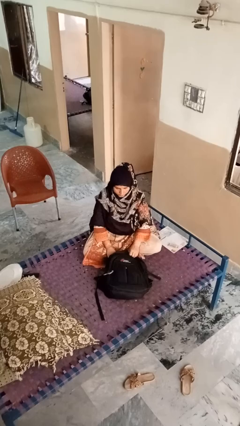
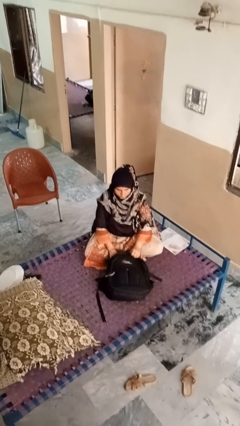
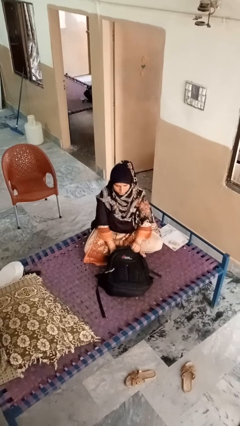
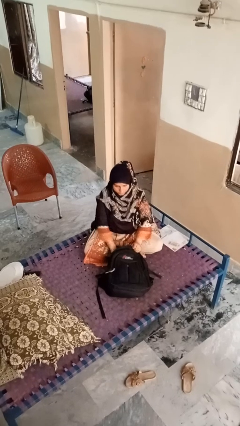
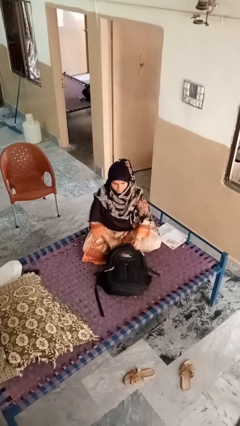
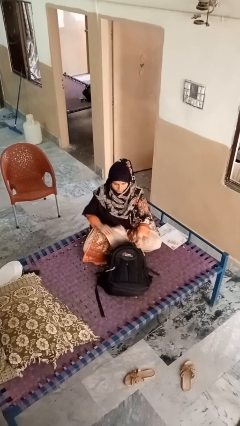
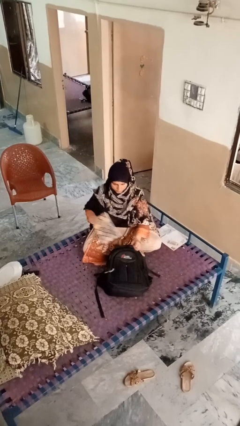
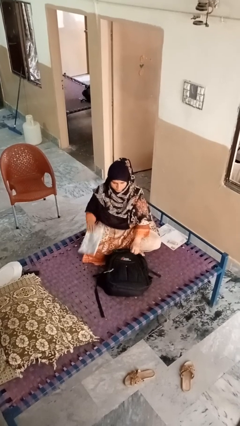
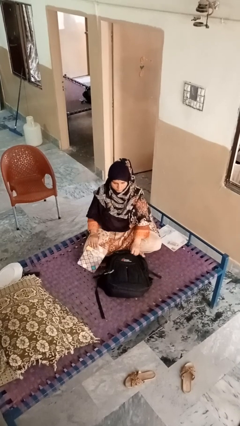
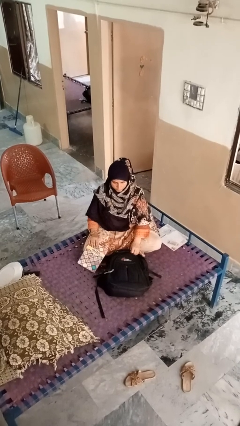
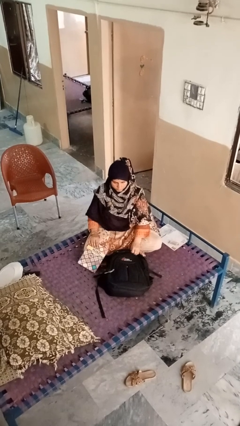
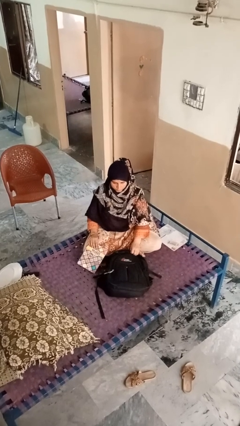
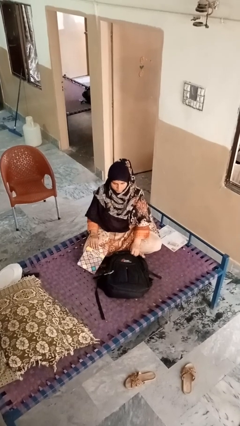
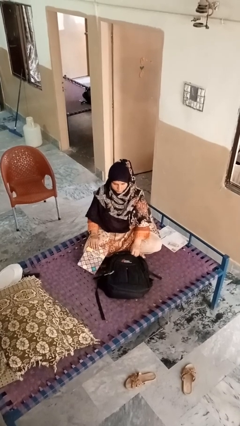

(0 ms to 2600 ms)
person takes object from bag

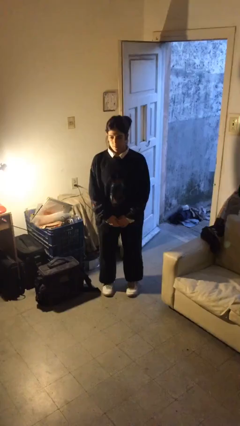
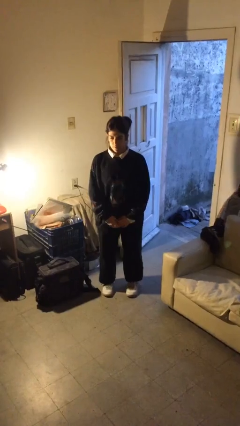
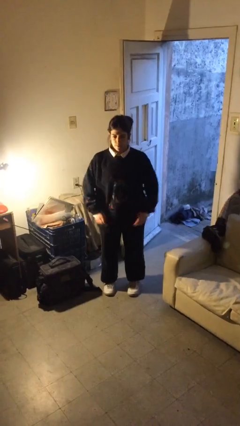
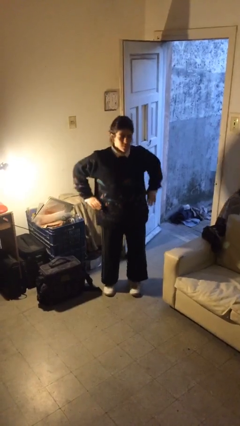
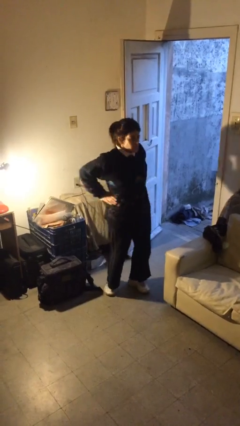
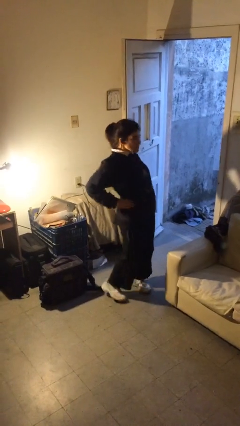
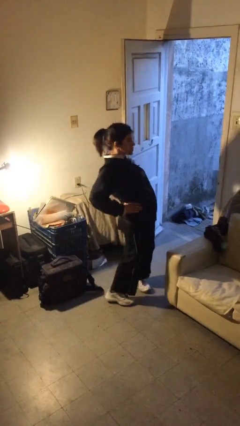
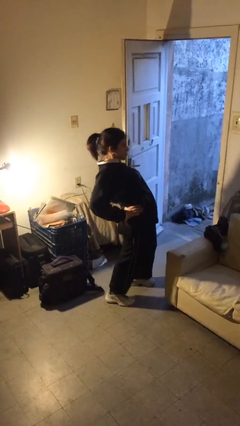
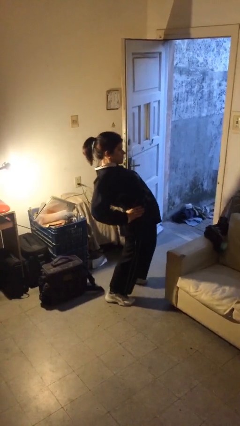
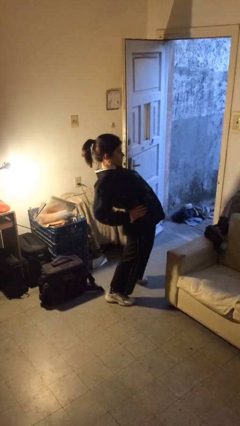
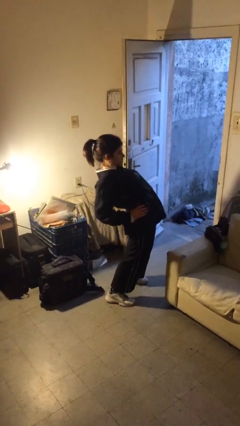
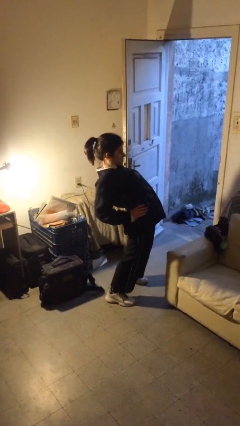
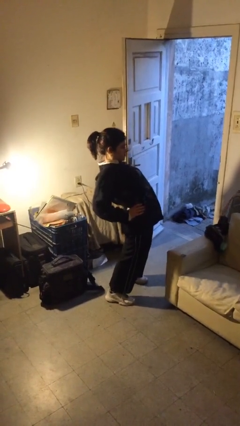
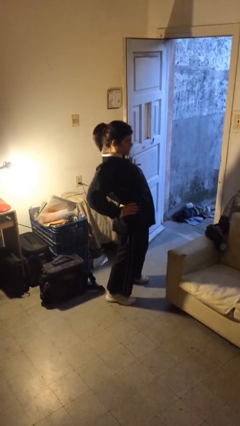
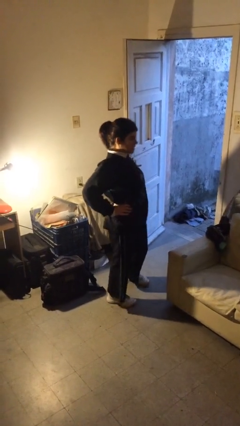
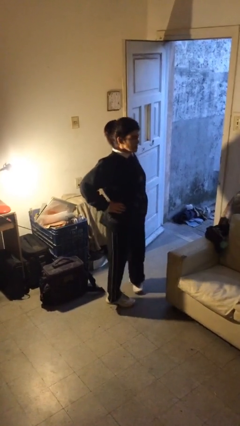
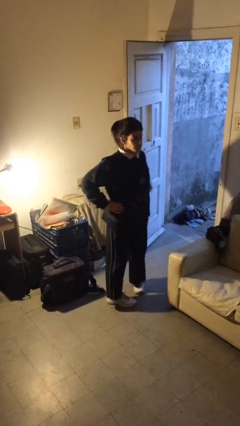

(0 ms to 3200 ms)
person stretches back

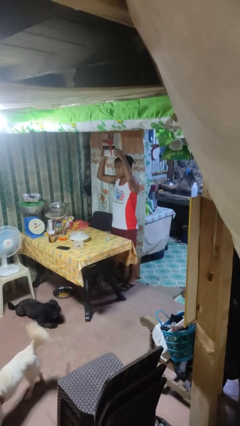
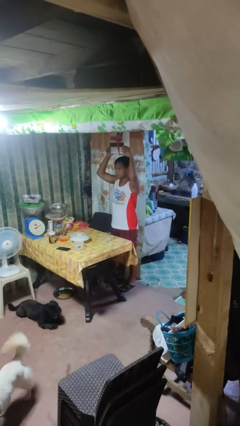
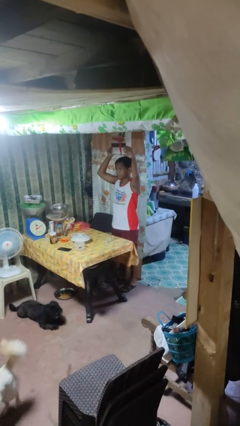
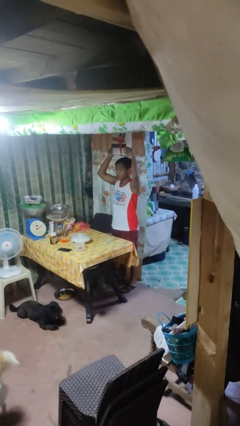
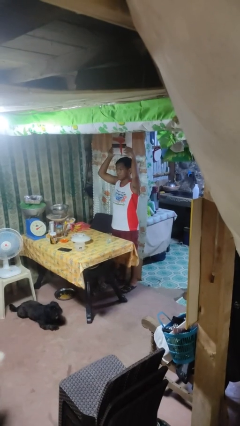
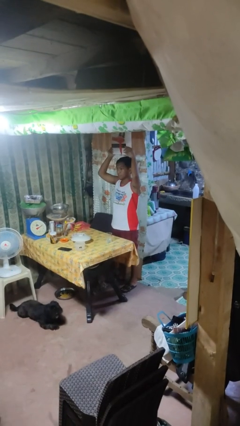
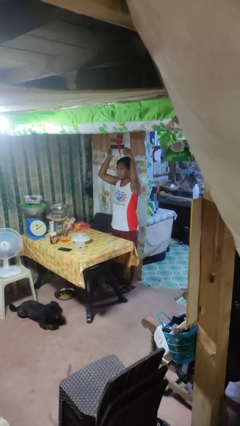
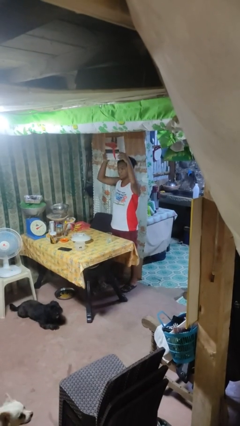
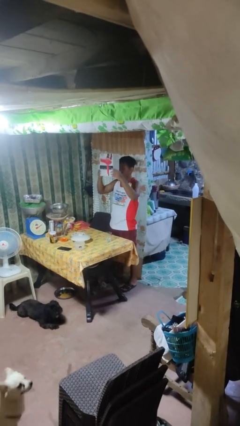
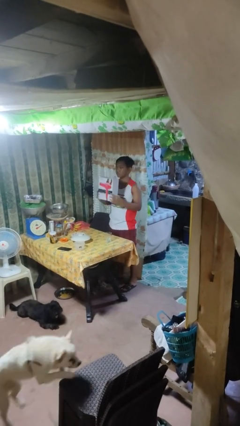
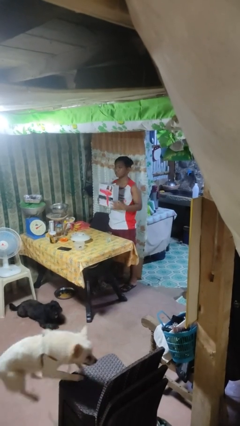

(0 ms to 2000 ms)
person holds object above head

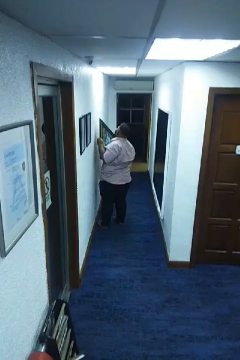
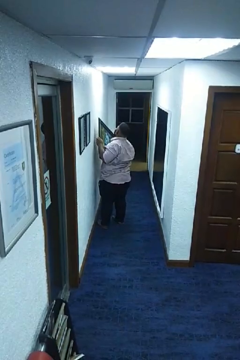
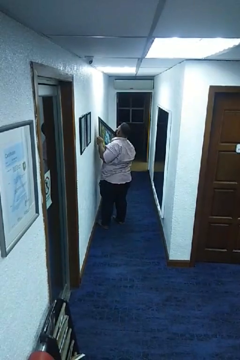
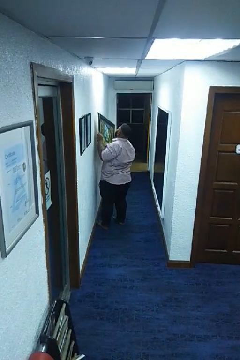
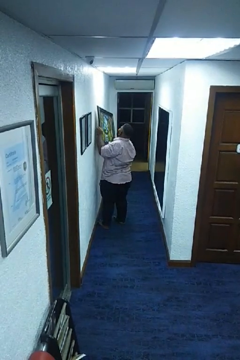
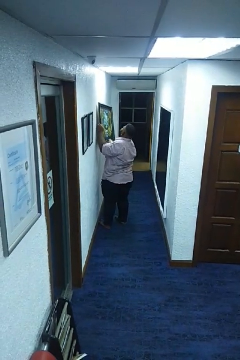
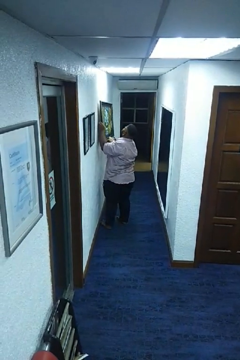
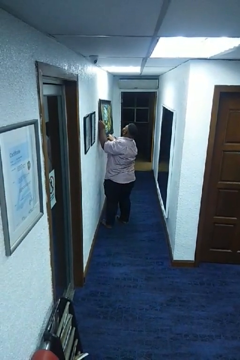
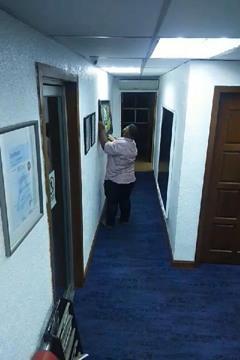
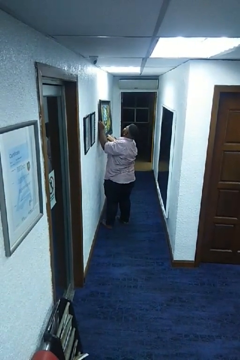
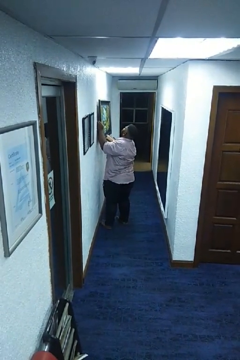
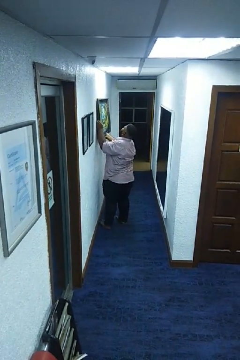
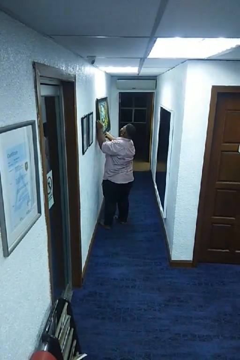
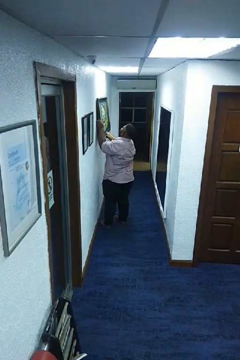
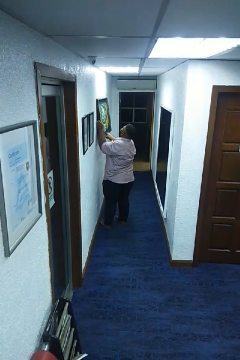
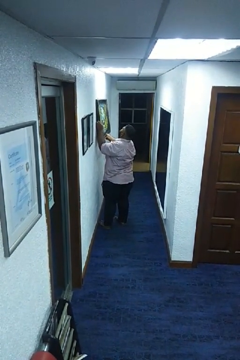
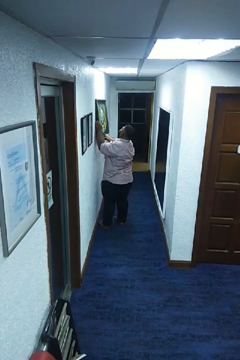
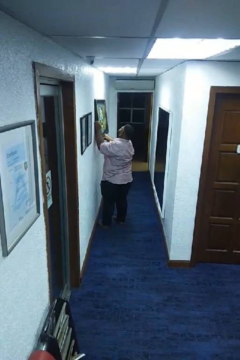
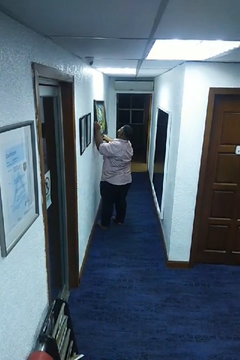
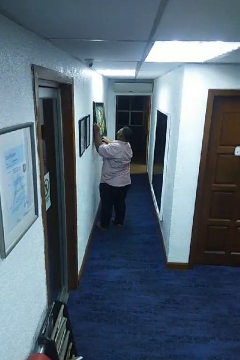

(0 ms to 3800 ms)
person puts up picture frame

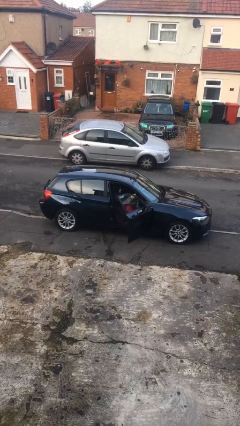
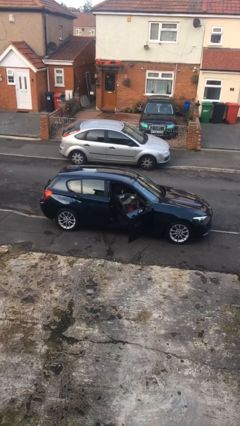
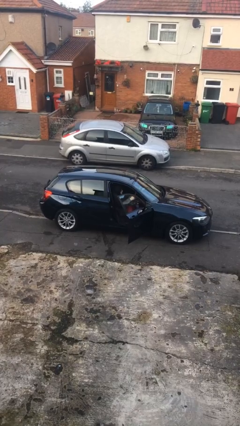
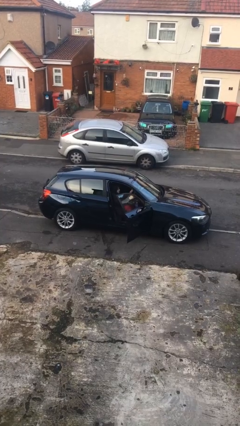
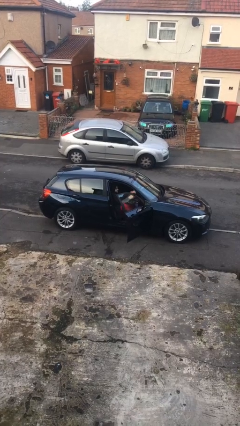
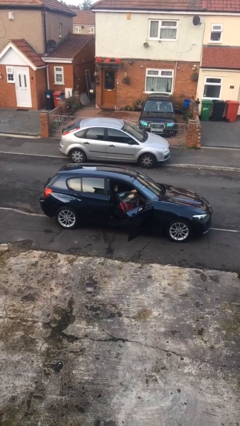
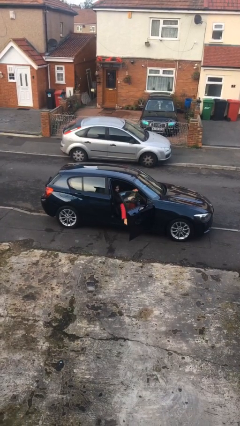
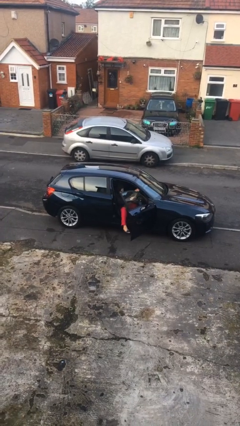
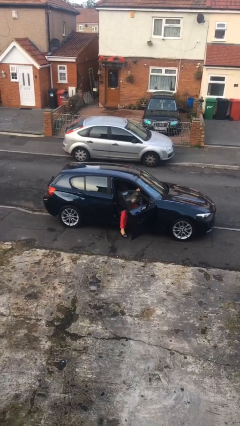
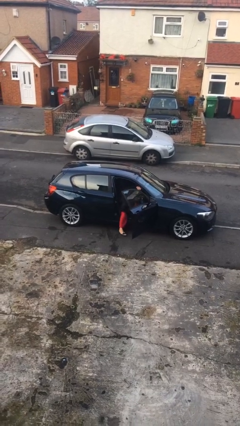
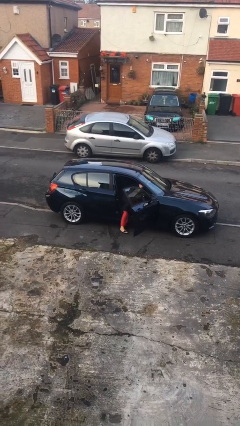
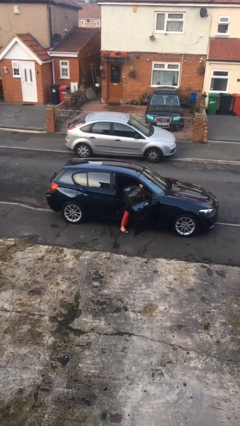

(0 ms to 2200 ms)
person exits car

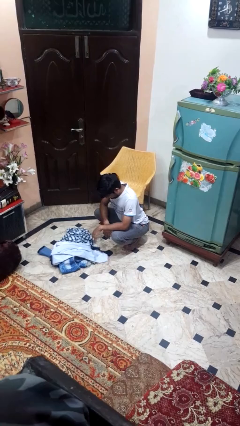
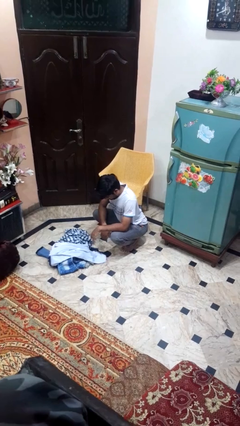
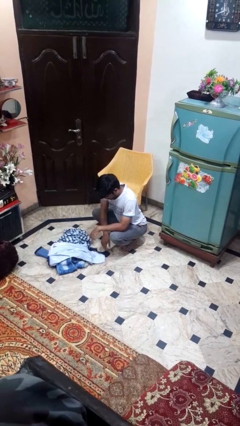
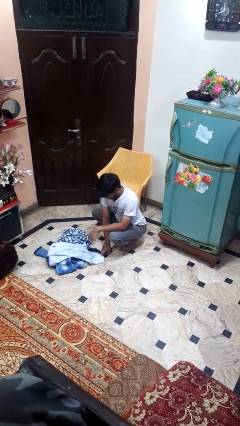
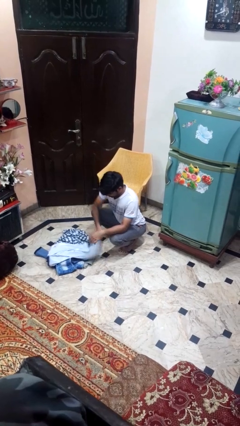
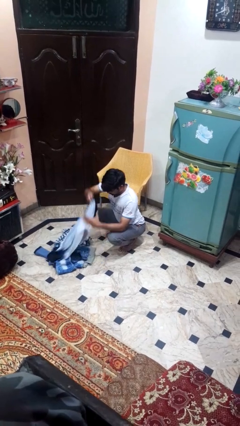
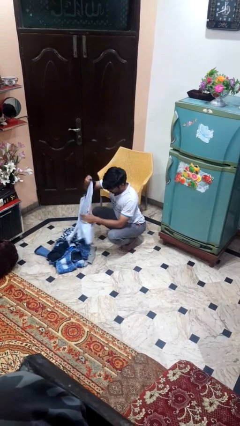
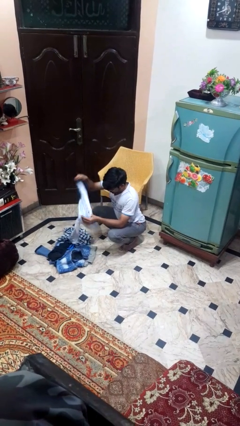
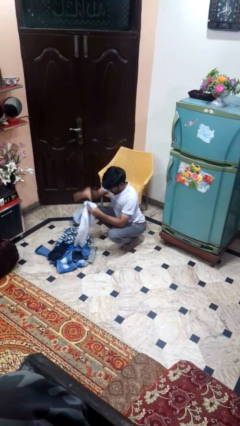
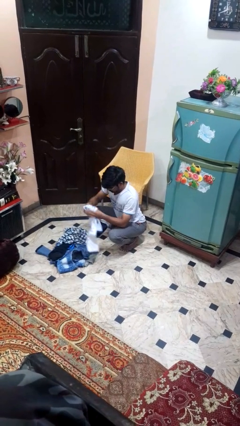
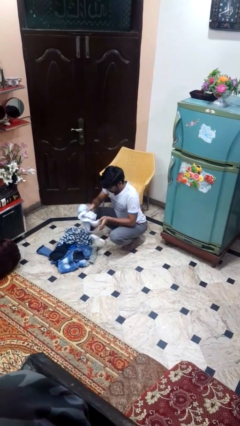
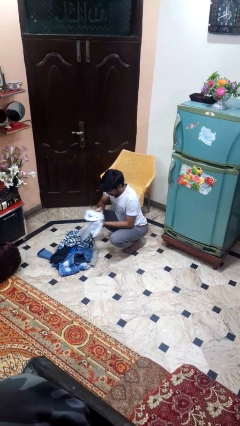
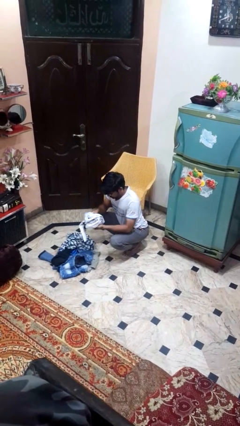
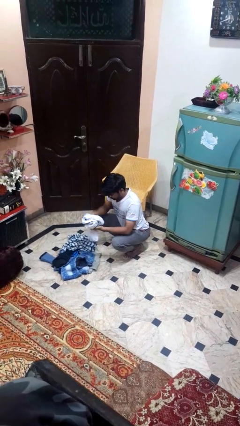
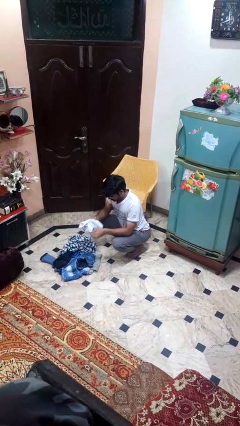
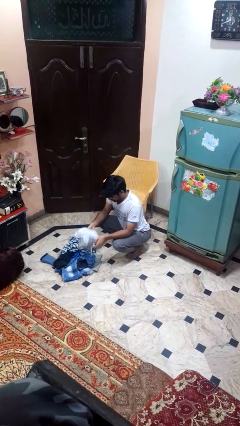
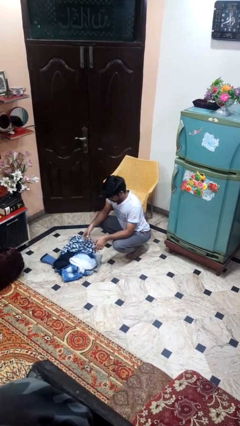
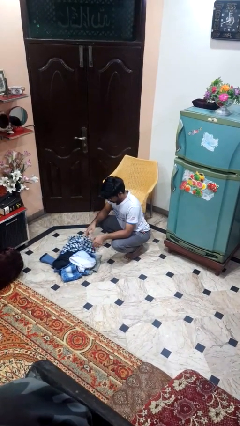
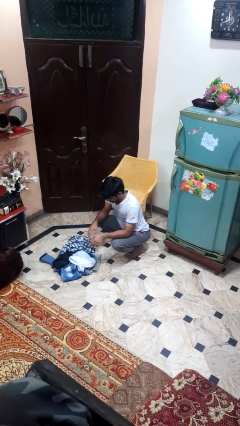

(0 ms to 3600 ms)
person folds pants

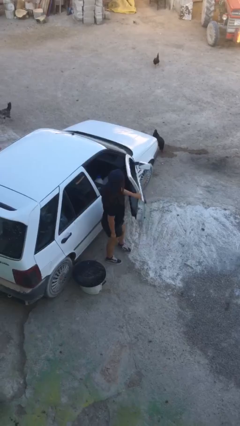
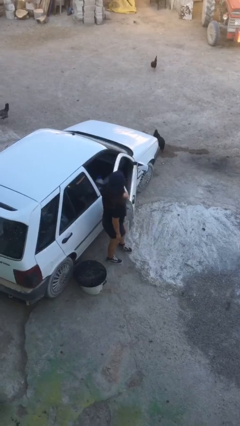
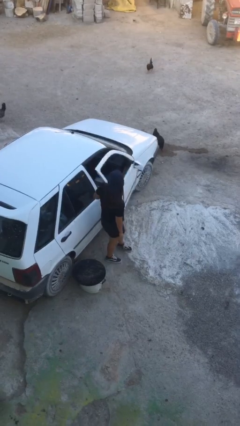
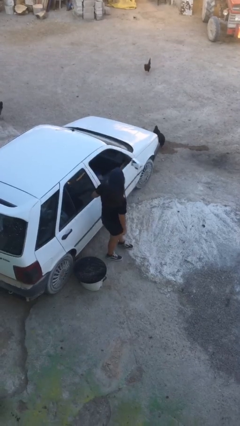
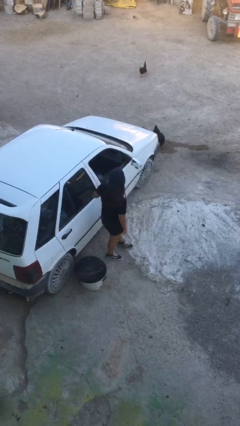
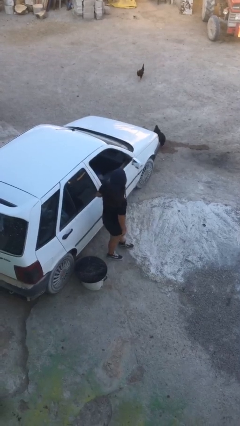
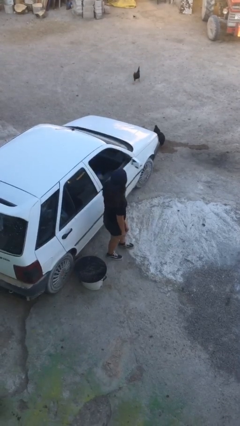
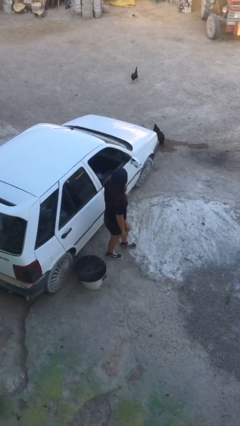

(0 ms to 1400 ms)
person closes car door
